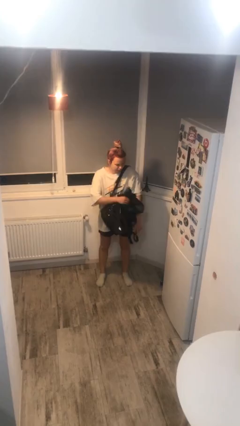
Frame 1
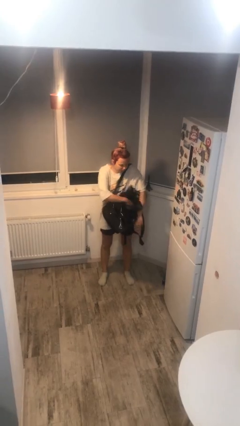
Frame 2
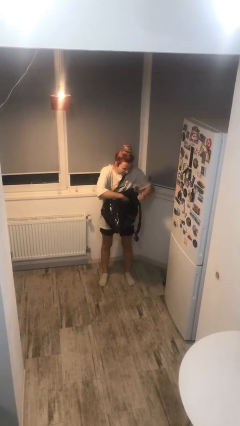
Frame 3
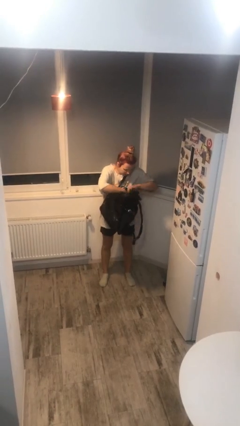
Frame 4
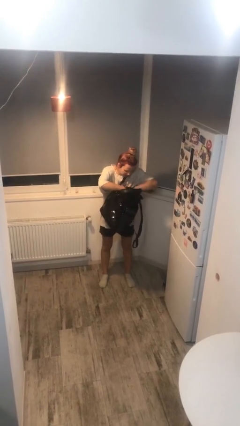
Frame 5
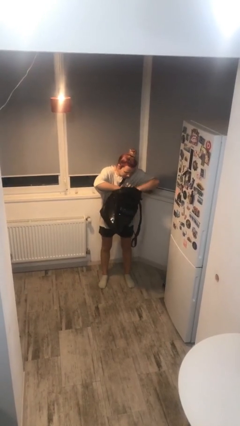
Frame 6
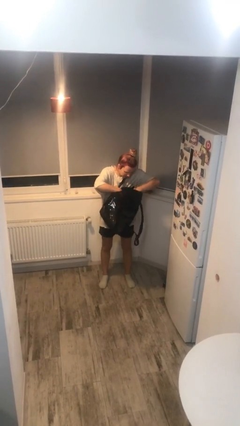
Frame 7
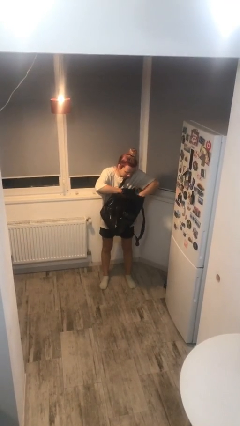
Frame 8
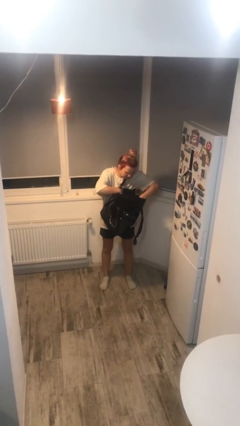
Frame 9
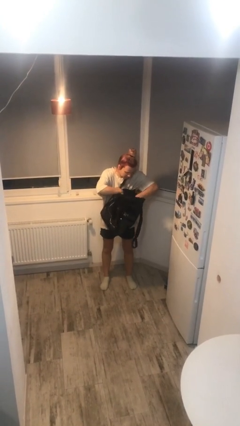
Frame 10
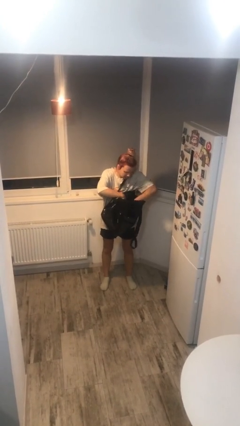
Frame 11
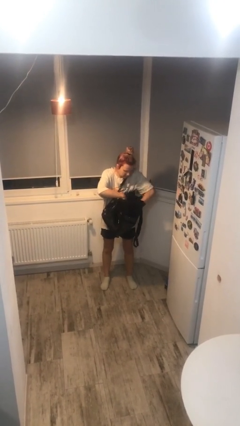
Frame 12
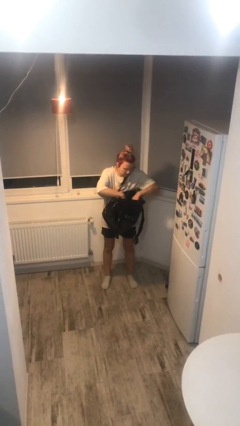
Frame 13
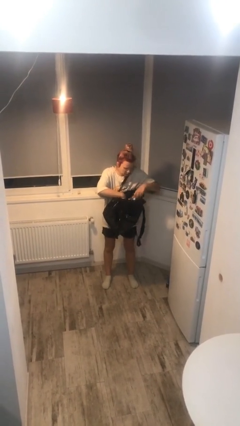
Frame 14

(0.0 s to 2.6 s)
person searches in backpack
